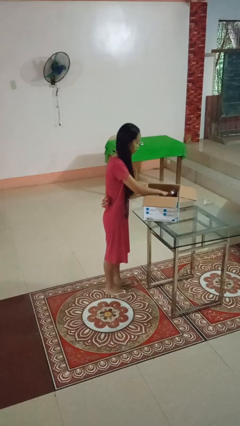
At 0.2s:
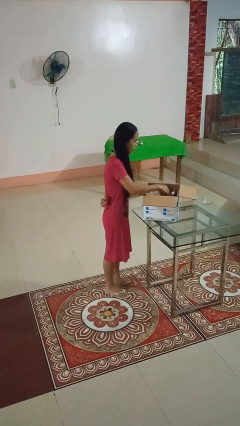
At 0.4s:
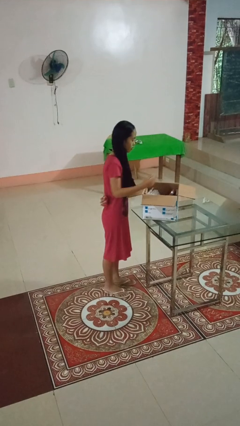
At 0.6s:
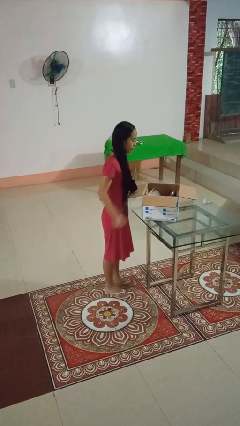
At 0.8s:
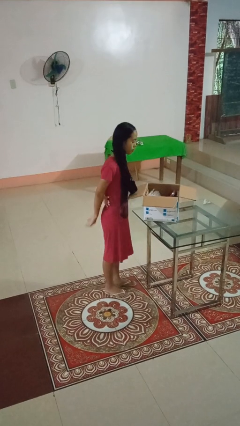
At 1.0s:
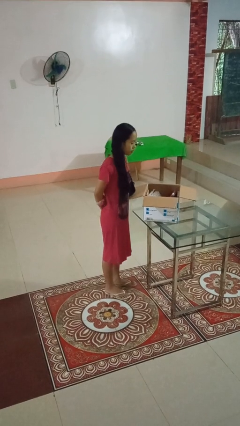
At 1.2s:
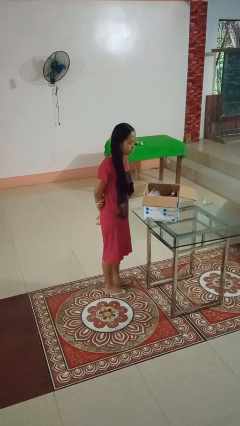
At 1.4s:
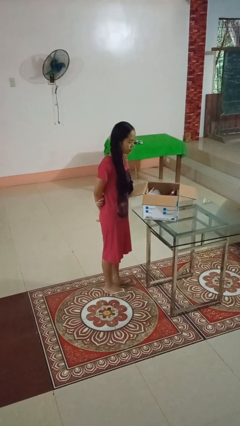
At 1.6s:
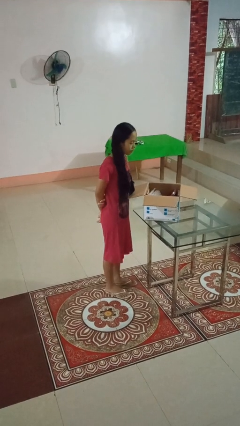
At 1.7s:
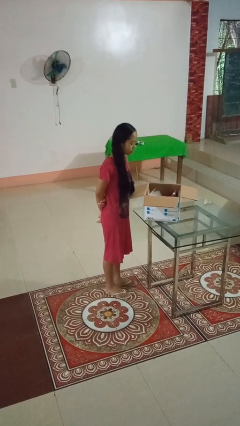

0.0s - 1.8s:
person puts object into box

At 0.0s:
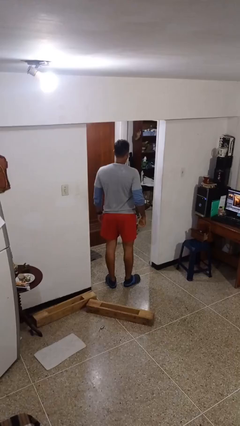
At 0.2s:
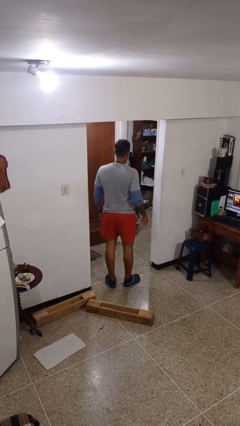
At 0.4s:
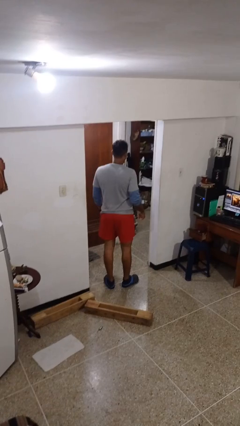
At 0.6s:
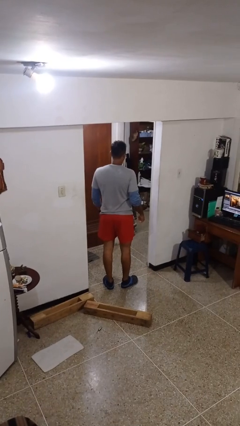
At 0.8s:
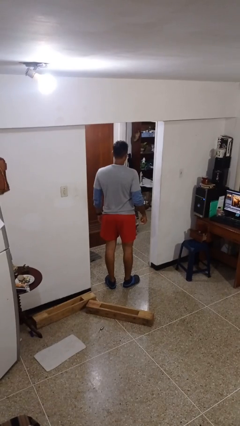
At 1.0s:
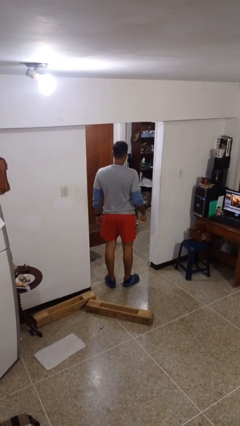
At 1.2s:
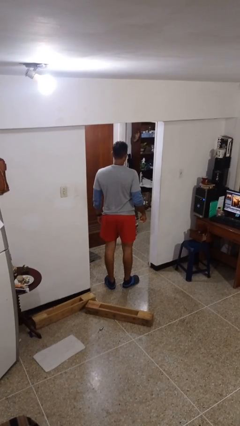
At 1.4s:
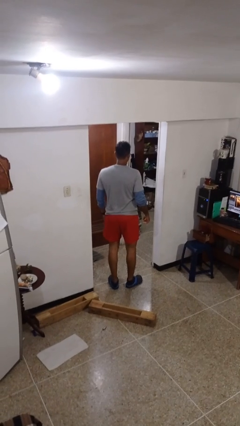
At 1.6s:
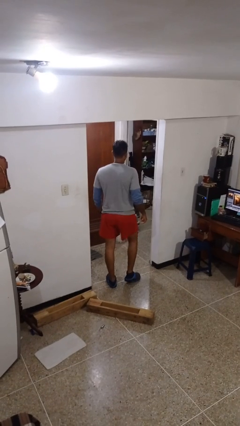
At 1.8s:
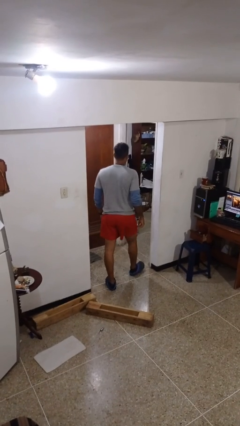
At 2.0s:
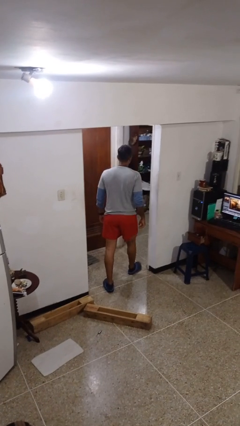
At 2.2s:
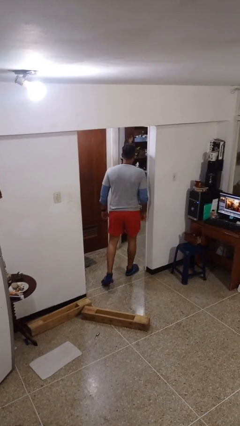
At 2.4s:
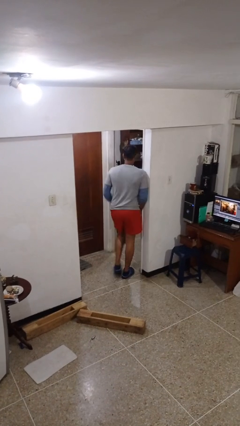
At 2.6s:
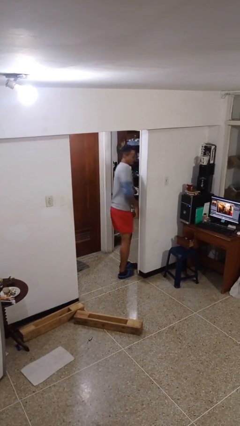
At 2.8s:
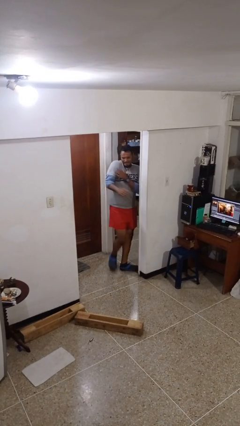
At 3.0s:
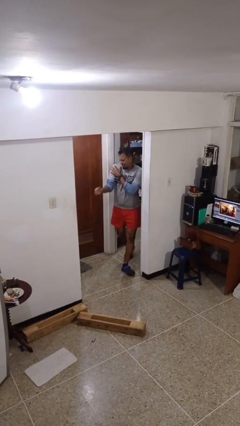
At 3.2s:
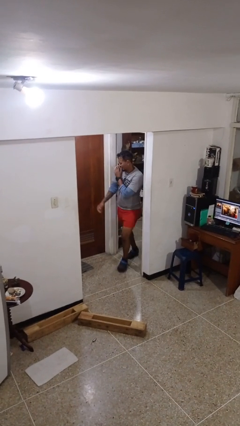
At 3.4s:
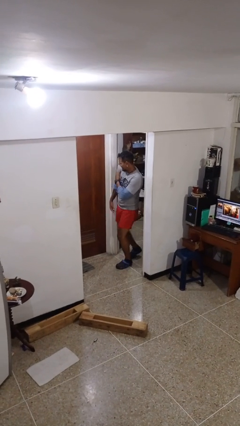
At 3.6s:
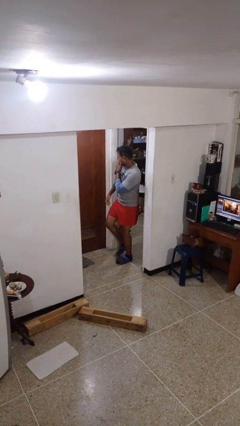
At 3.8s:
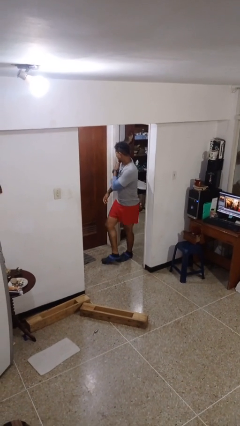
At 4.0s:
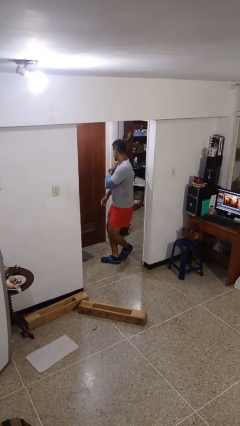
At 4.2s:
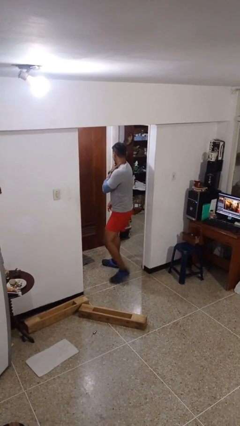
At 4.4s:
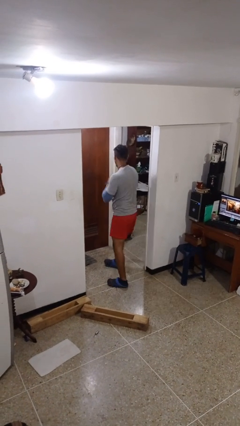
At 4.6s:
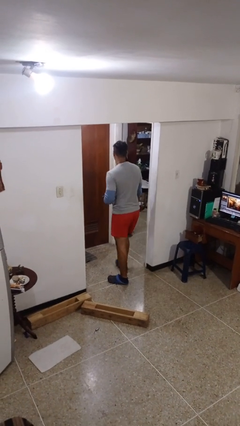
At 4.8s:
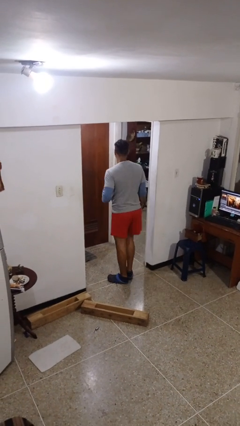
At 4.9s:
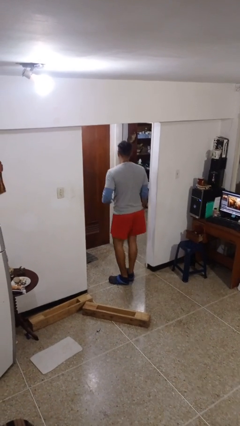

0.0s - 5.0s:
person bumps into wall

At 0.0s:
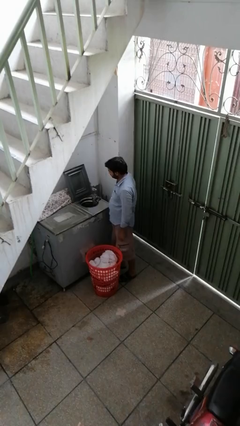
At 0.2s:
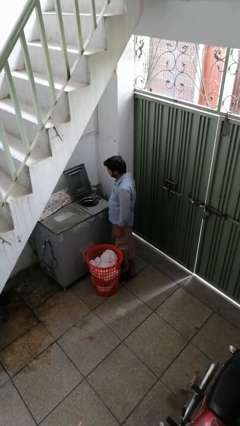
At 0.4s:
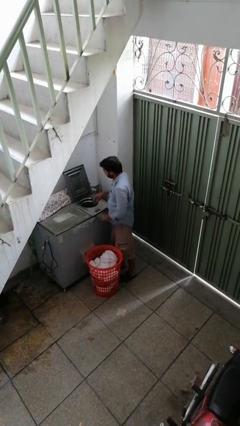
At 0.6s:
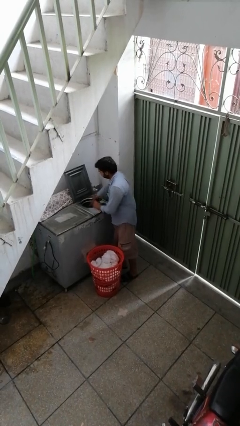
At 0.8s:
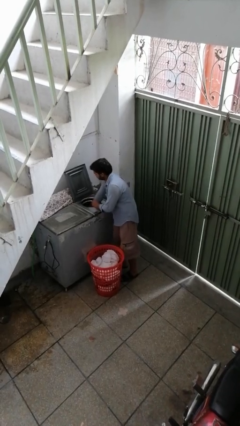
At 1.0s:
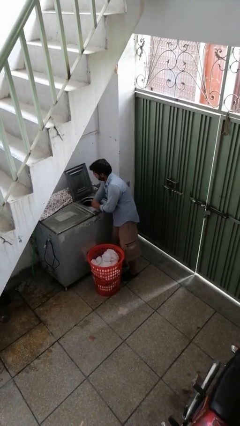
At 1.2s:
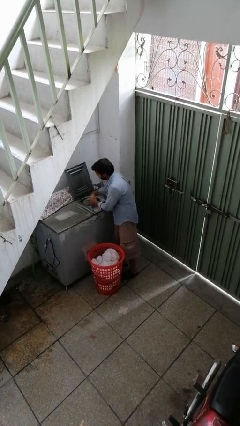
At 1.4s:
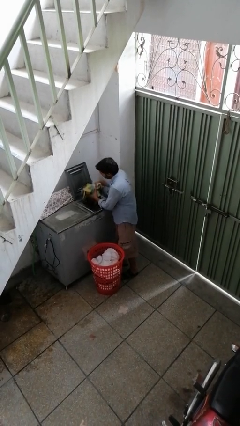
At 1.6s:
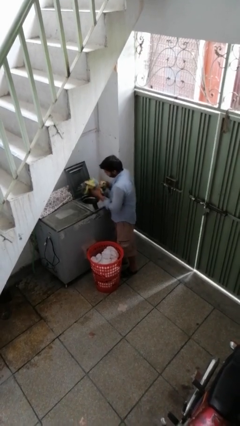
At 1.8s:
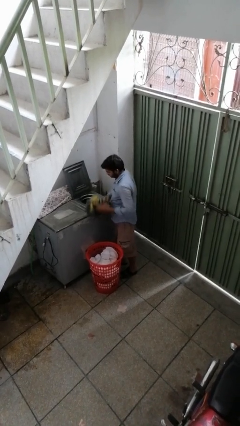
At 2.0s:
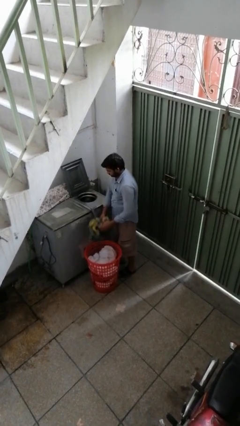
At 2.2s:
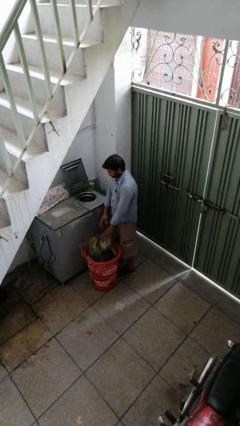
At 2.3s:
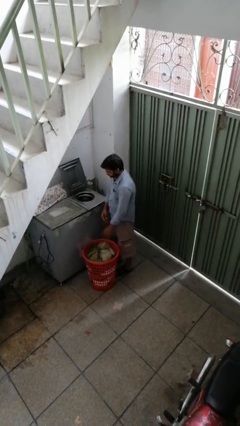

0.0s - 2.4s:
person unloads dryer

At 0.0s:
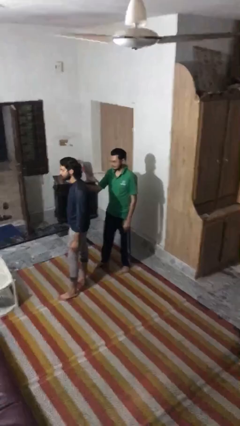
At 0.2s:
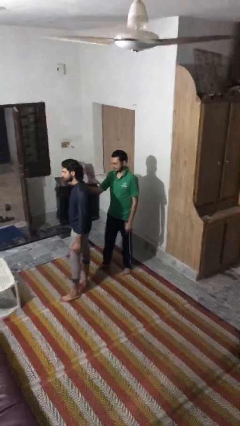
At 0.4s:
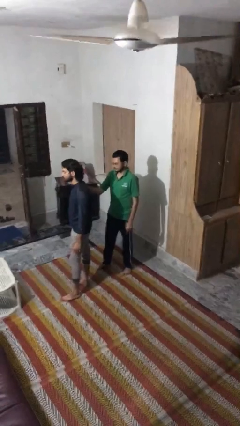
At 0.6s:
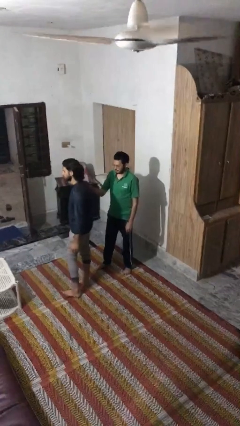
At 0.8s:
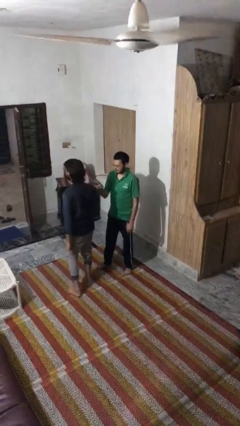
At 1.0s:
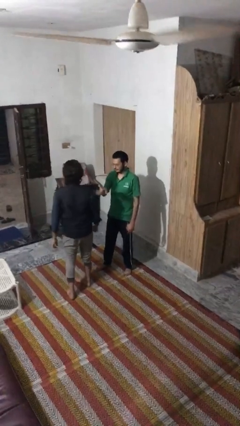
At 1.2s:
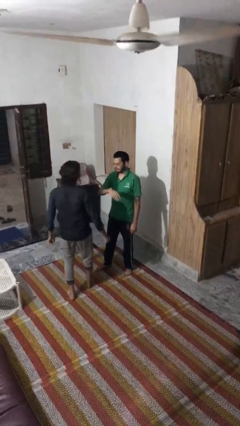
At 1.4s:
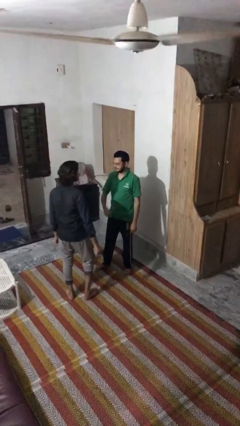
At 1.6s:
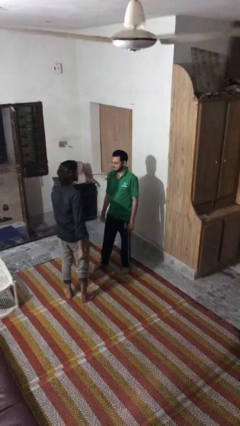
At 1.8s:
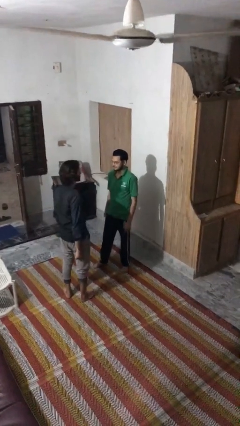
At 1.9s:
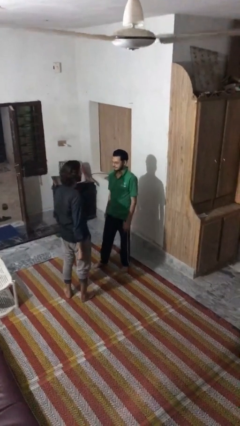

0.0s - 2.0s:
person spins person around

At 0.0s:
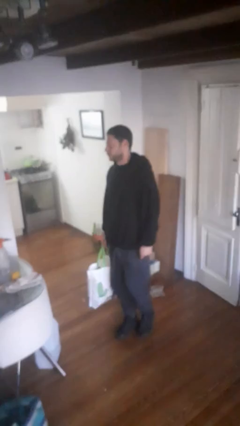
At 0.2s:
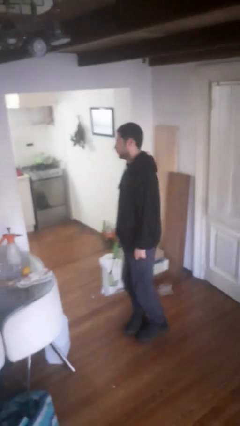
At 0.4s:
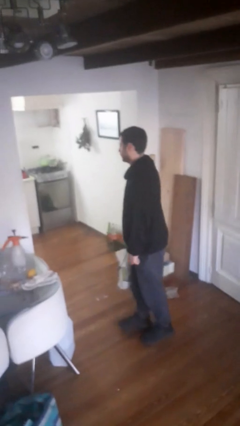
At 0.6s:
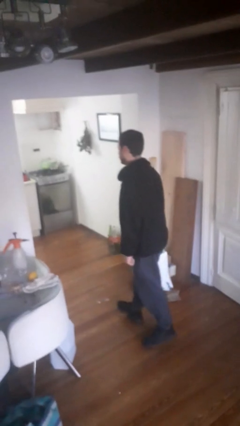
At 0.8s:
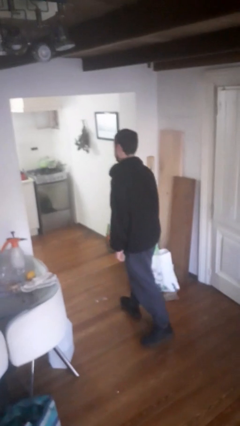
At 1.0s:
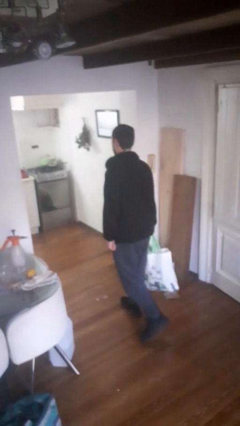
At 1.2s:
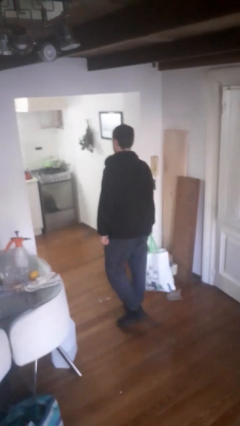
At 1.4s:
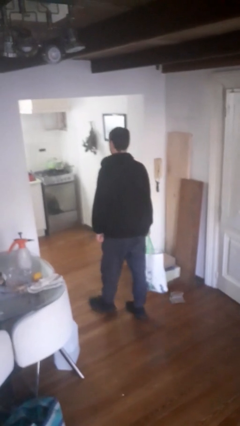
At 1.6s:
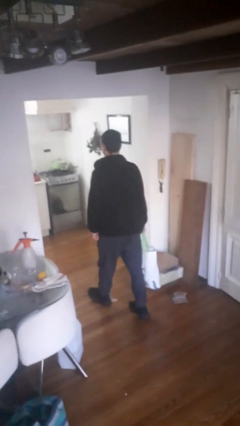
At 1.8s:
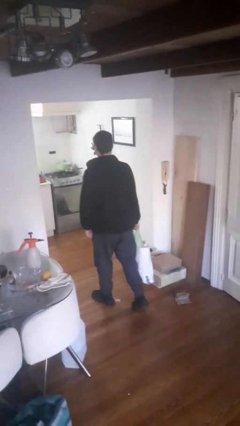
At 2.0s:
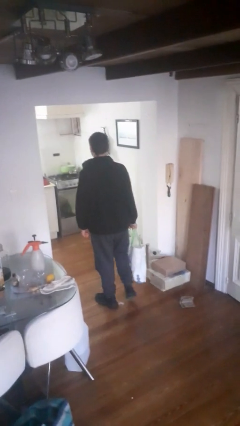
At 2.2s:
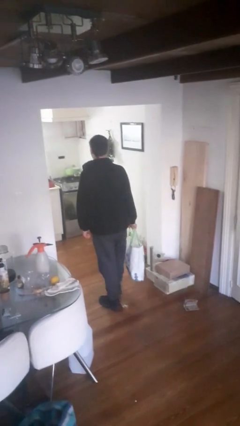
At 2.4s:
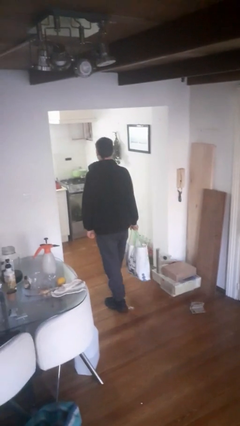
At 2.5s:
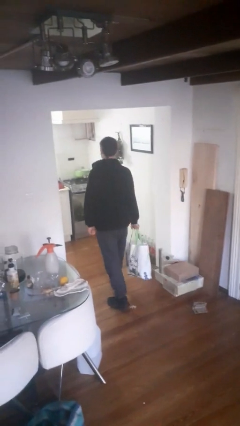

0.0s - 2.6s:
person carries groceries

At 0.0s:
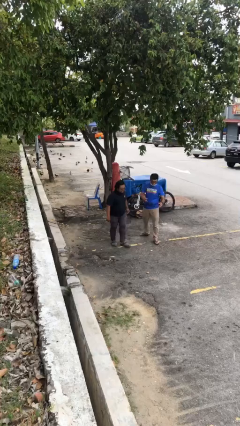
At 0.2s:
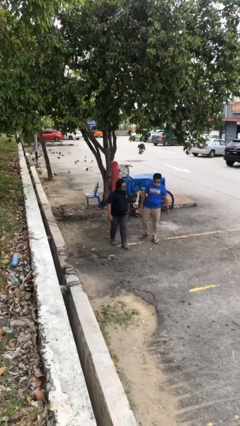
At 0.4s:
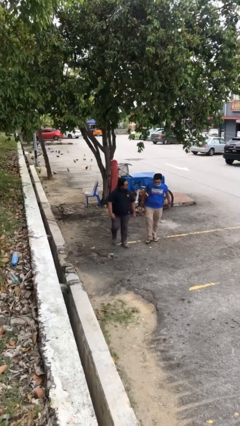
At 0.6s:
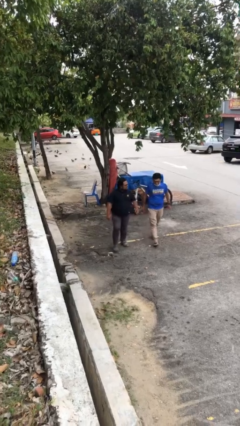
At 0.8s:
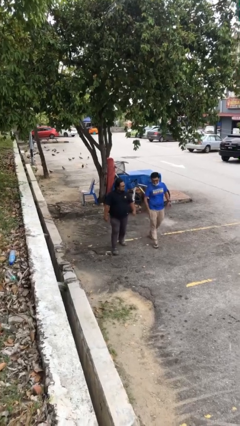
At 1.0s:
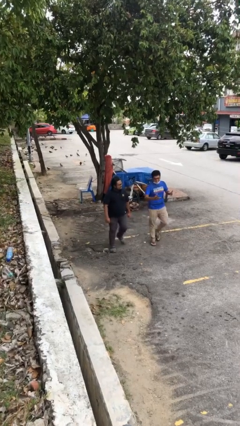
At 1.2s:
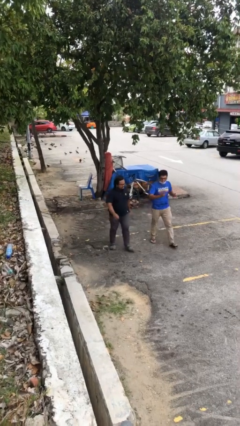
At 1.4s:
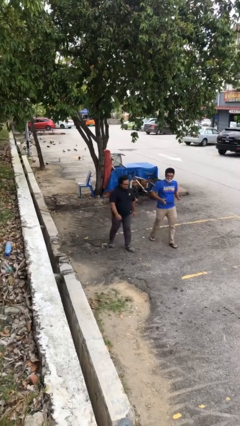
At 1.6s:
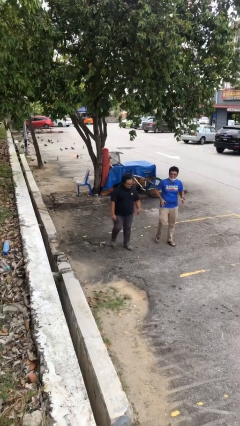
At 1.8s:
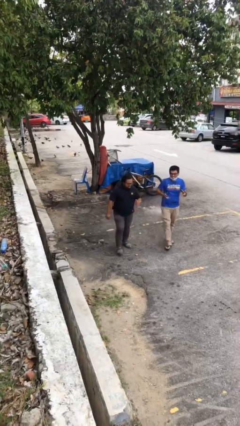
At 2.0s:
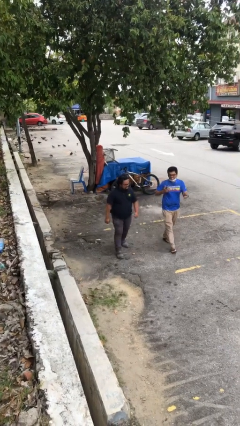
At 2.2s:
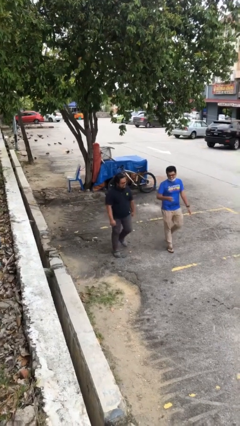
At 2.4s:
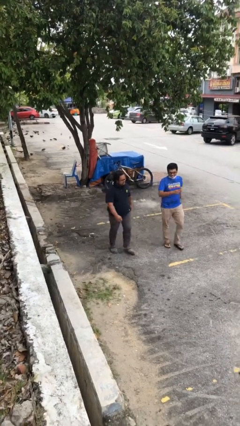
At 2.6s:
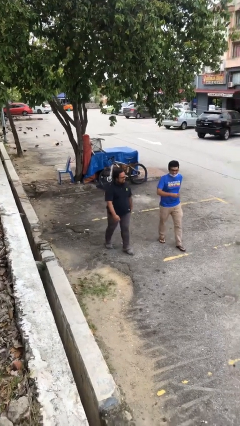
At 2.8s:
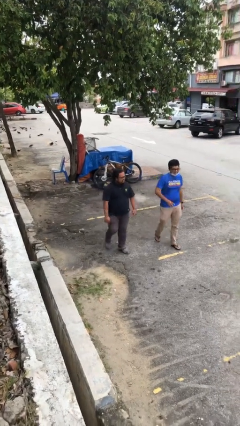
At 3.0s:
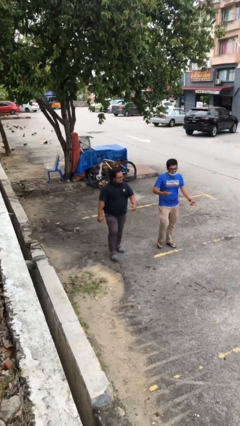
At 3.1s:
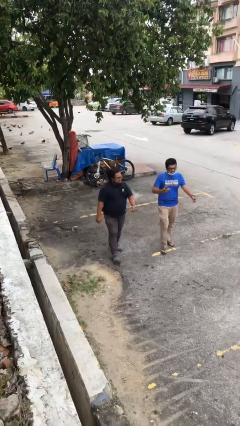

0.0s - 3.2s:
person talks to person

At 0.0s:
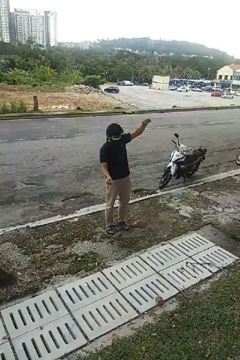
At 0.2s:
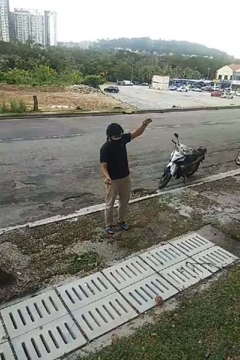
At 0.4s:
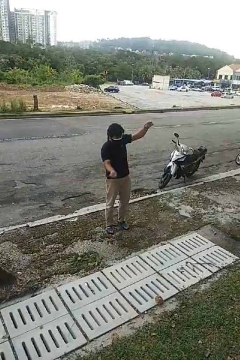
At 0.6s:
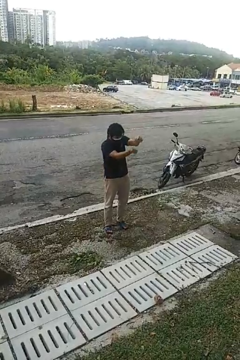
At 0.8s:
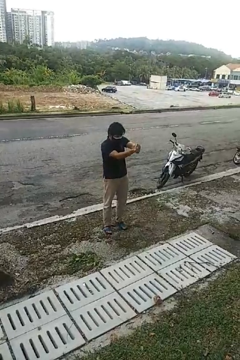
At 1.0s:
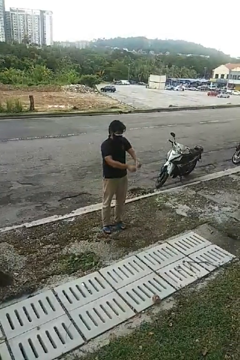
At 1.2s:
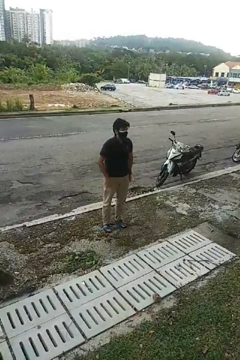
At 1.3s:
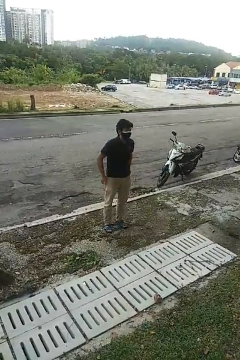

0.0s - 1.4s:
person gestures zoom out
